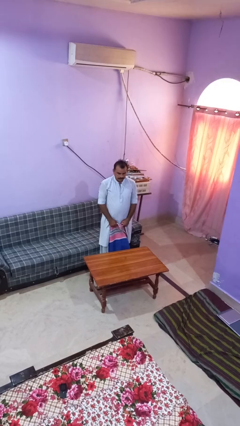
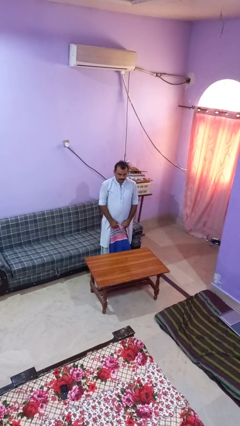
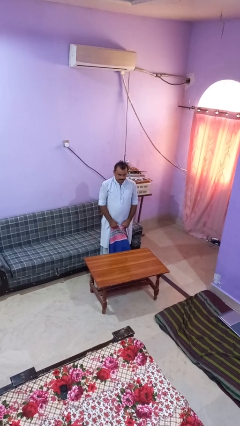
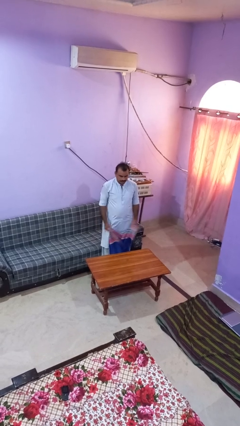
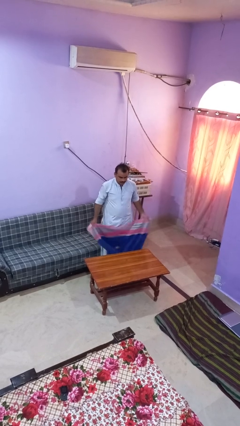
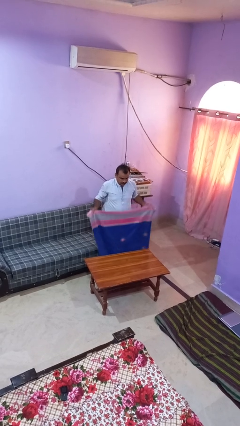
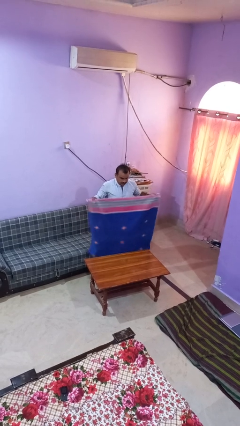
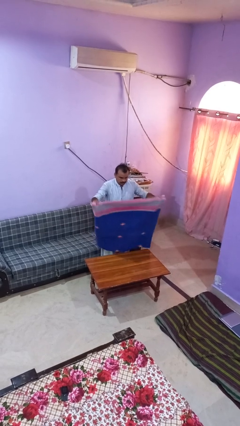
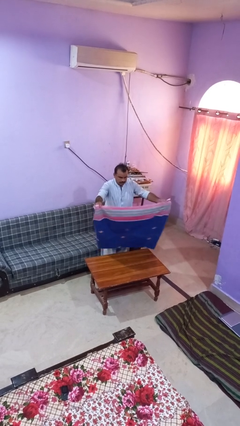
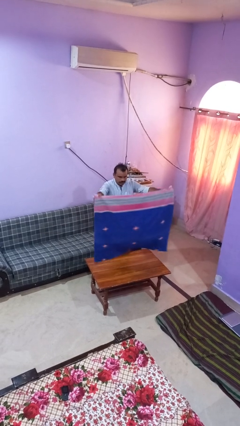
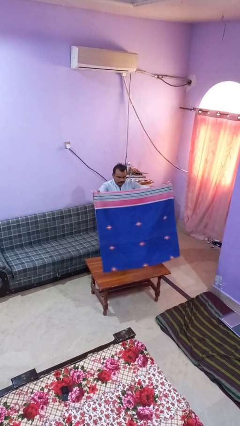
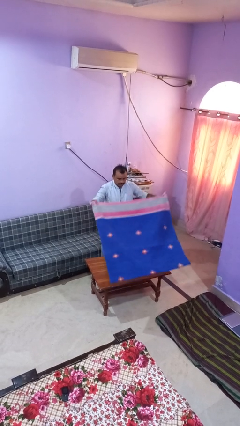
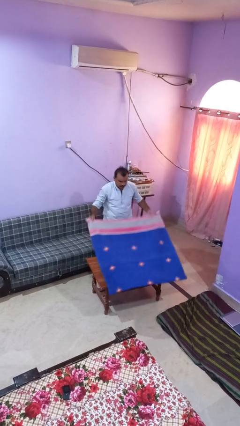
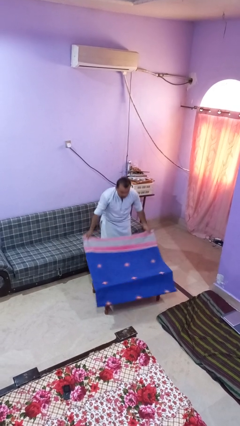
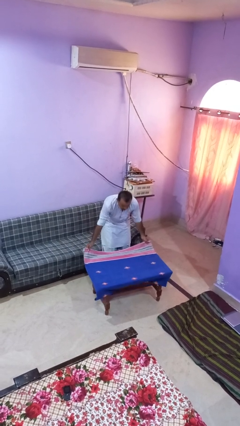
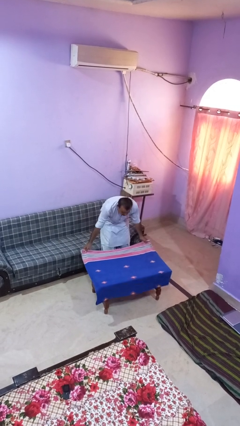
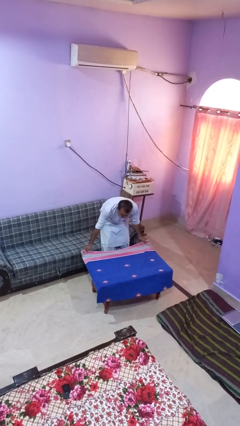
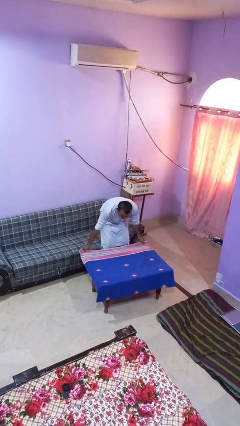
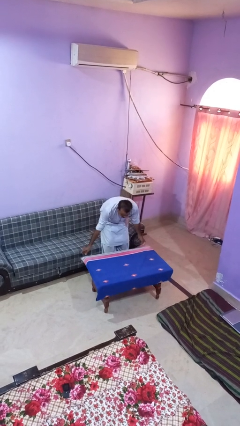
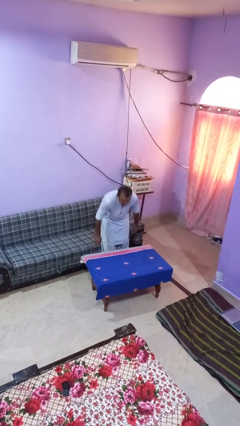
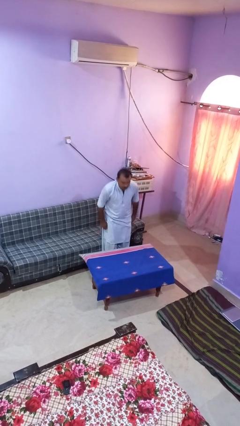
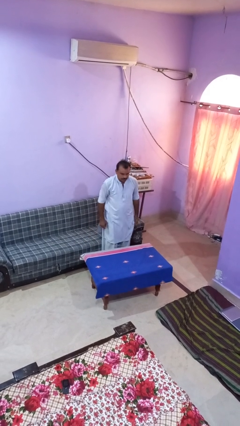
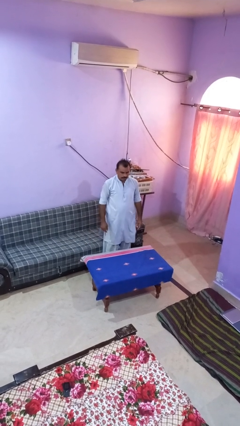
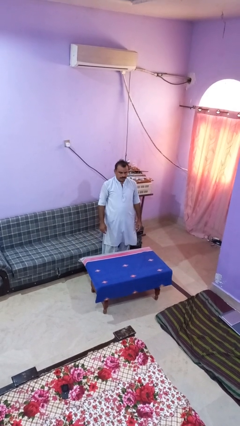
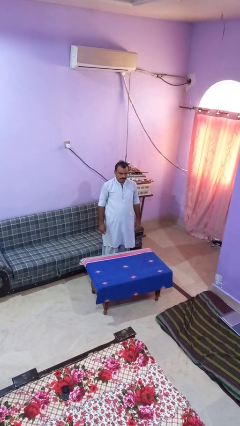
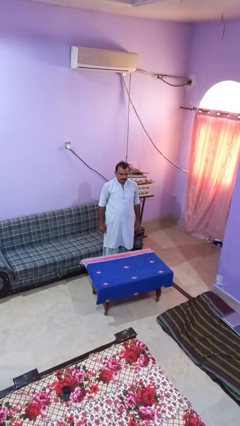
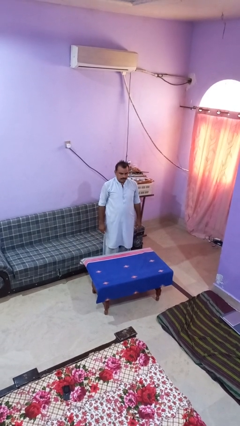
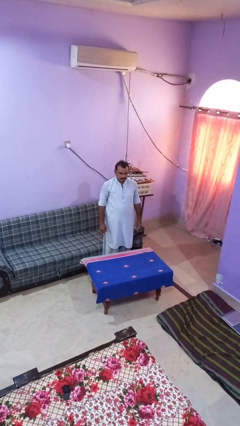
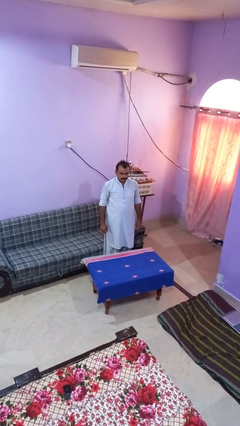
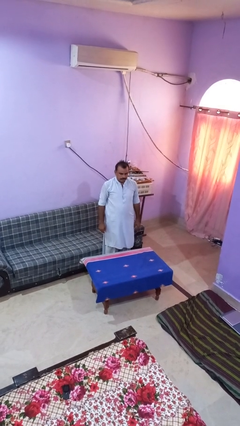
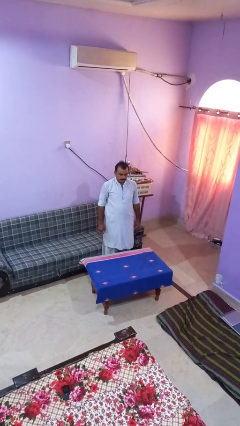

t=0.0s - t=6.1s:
person spreads tablecloth

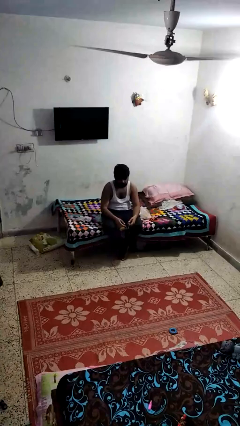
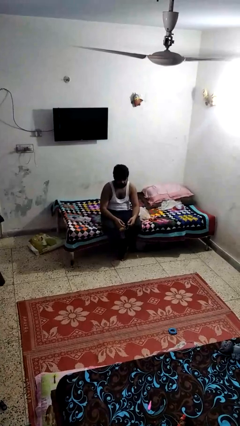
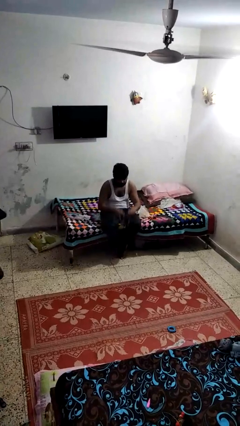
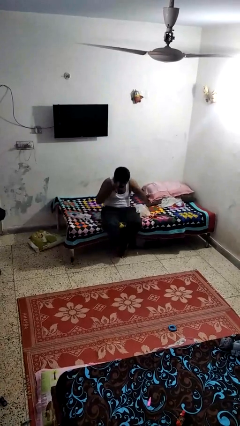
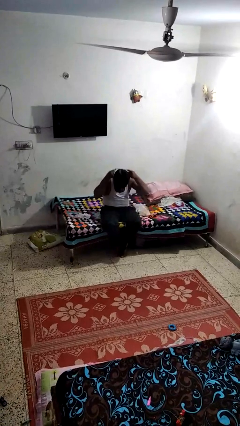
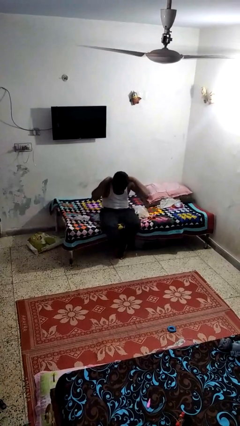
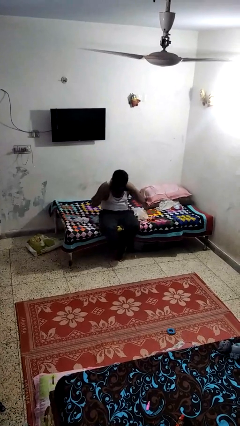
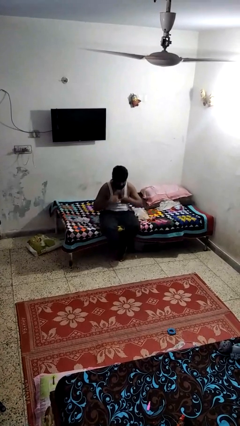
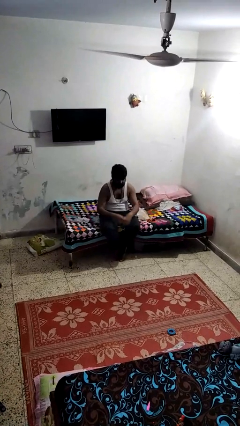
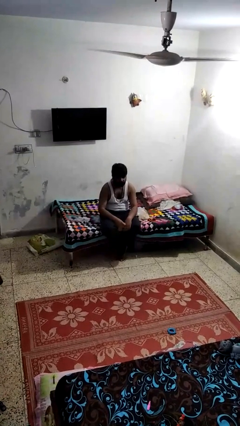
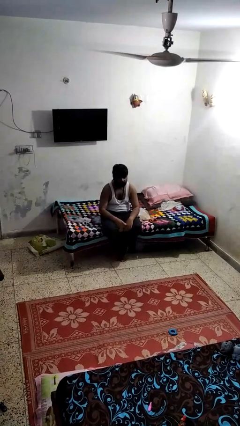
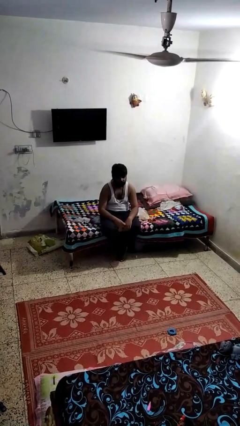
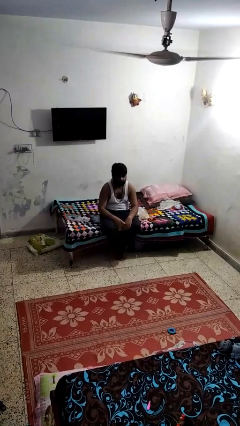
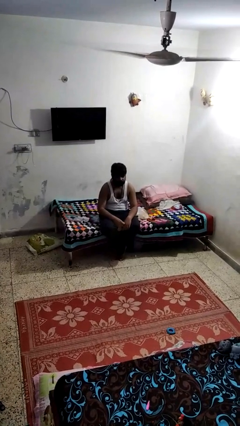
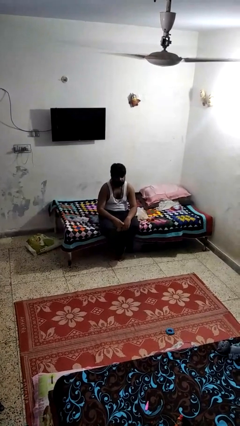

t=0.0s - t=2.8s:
person puts on necklace

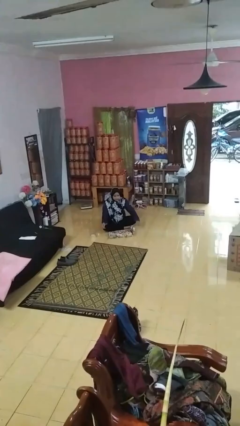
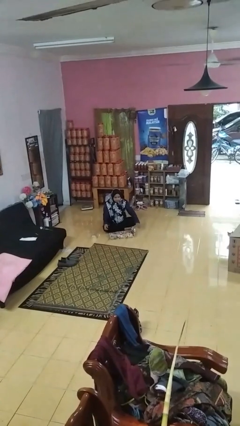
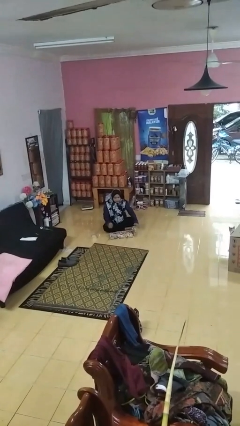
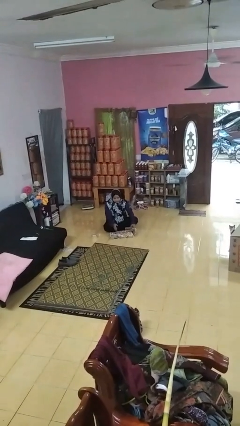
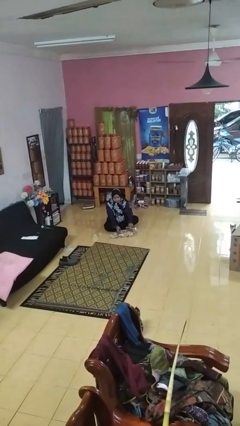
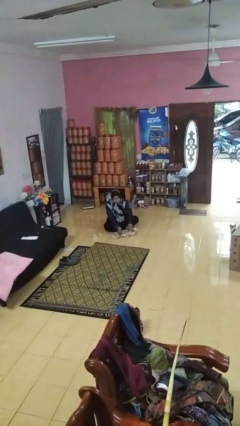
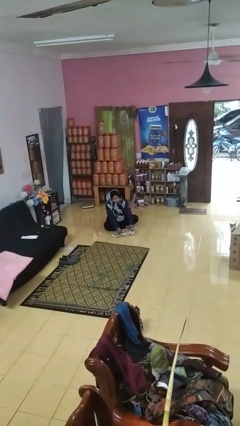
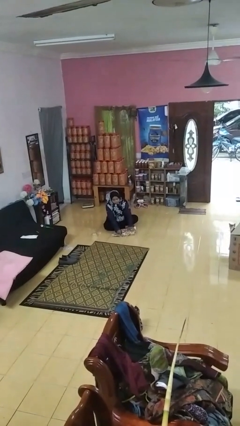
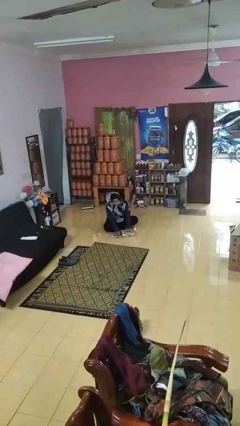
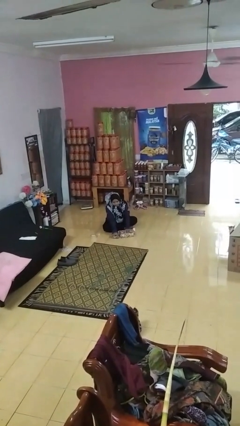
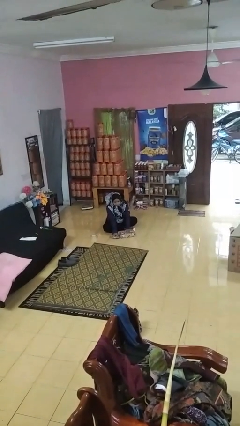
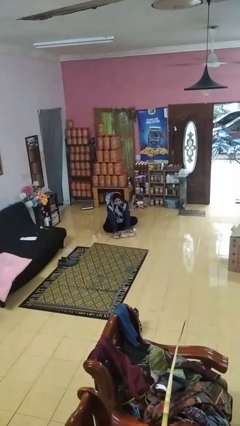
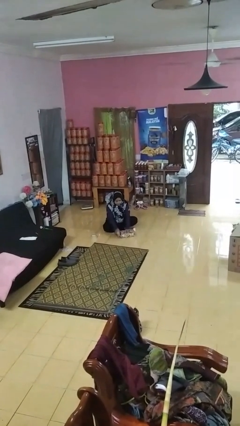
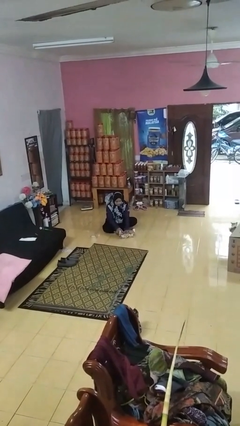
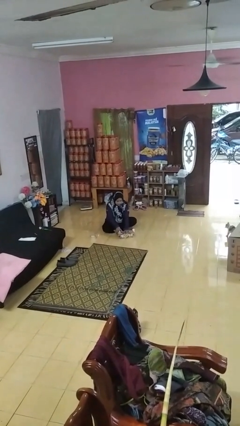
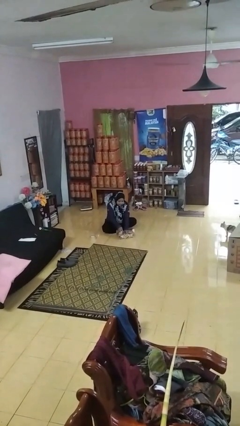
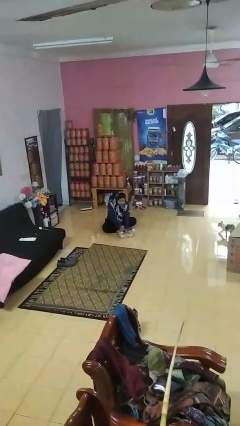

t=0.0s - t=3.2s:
person wraps box

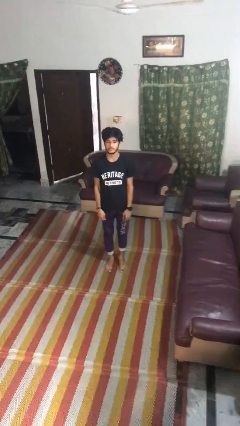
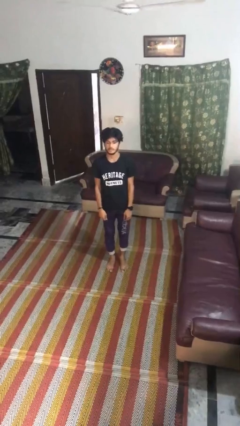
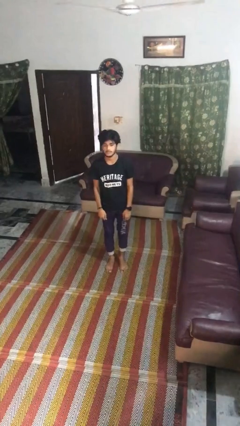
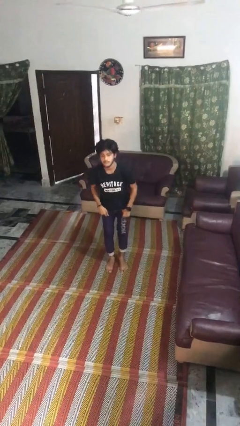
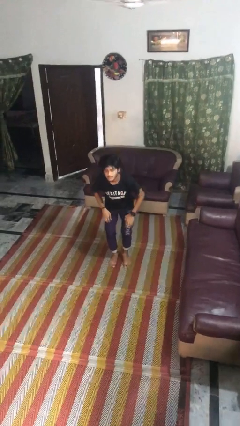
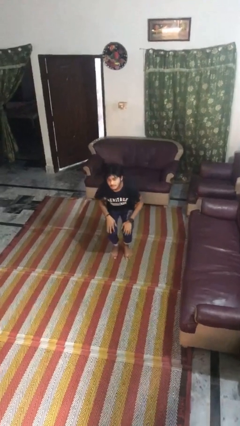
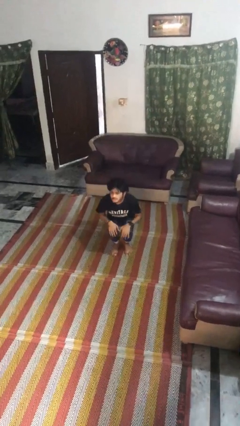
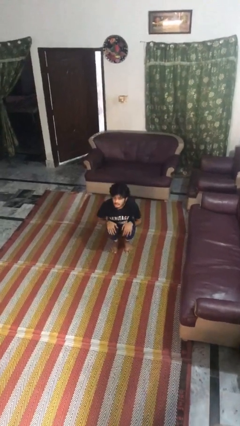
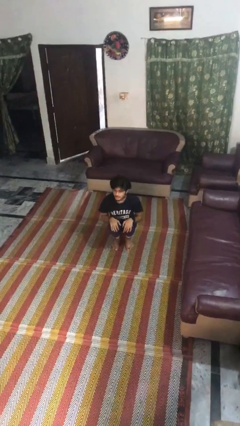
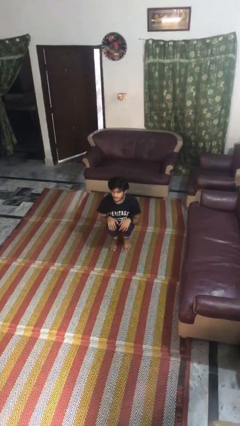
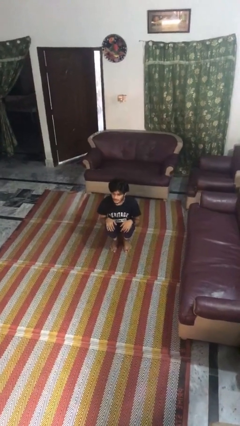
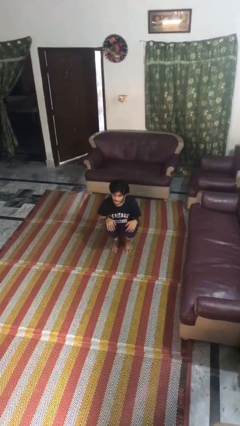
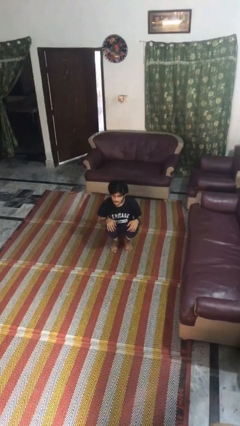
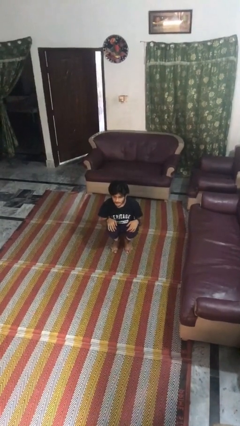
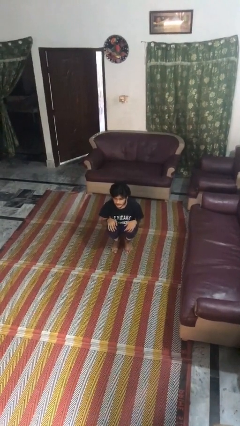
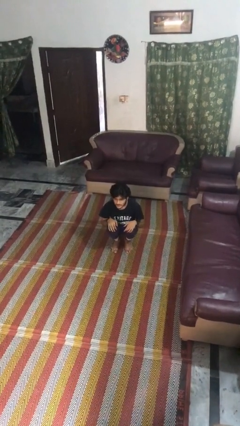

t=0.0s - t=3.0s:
person squats

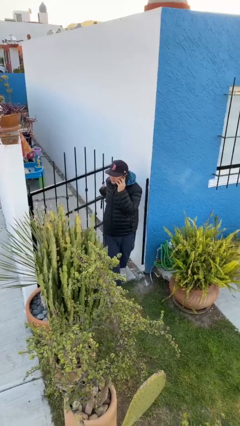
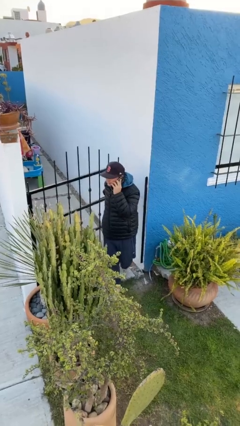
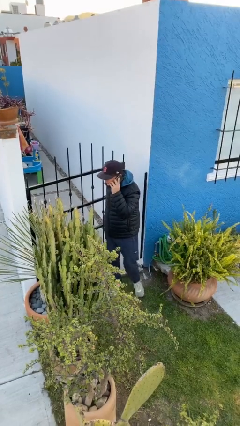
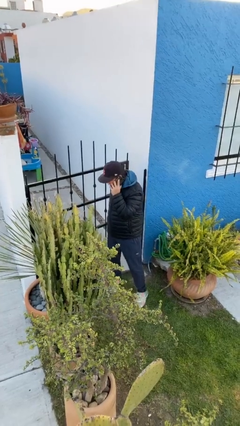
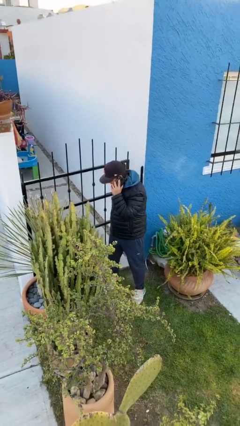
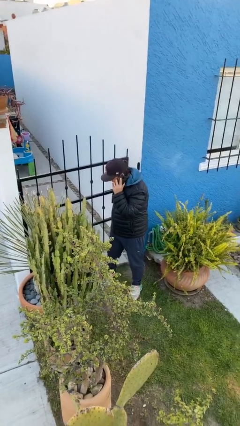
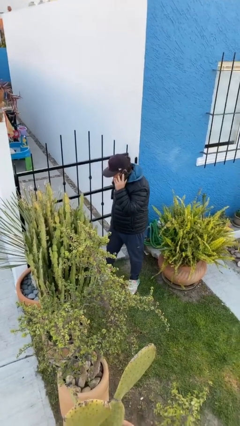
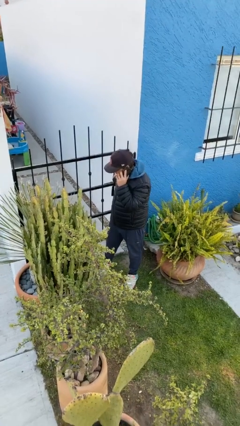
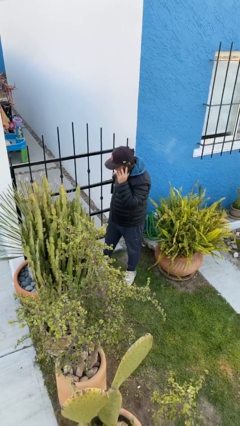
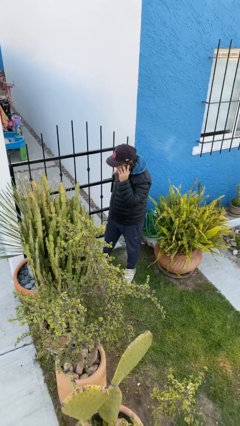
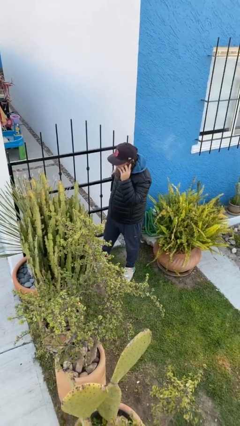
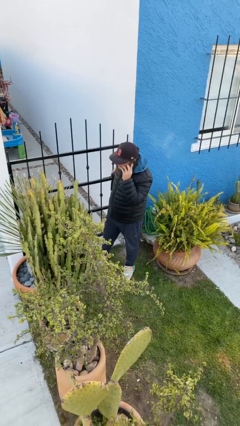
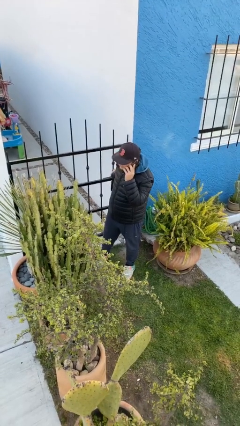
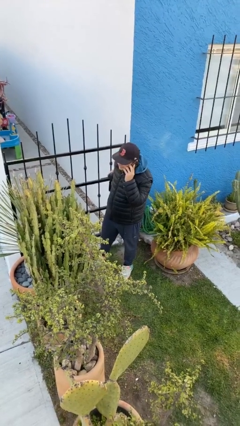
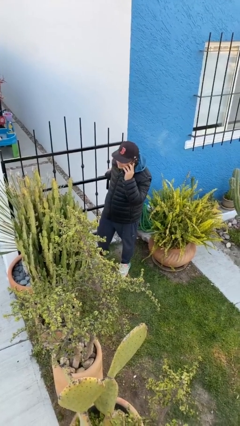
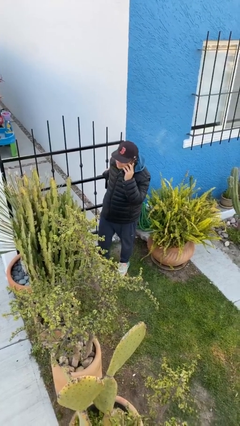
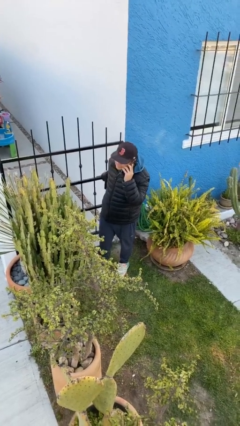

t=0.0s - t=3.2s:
person closes facility door
